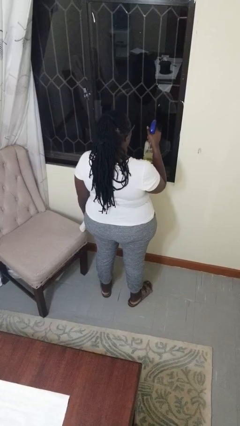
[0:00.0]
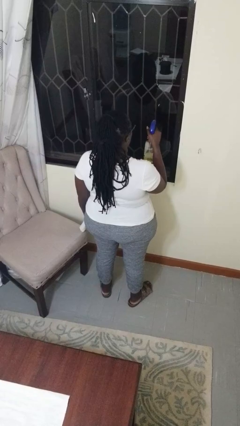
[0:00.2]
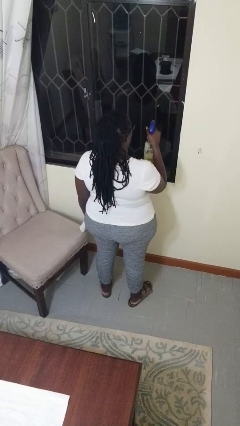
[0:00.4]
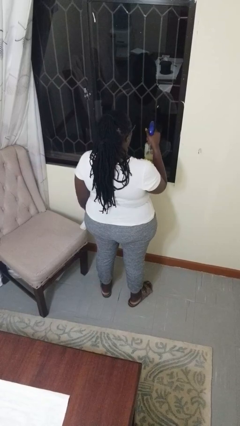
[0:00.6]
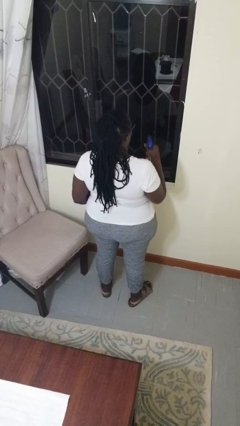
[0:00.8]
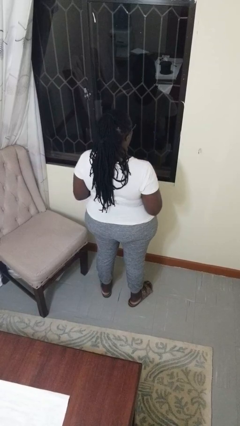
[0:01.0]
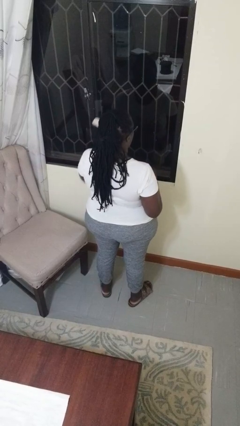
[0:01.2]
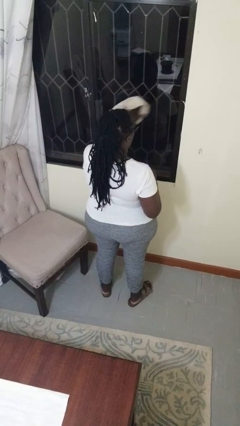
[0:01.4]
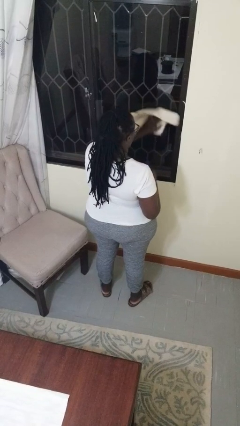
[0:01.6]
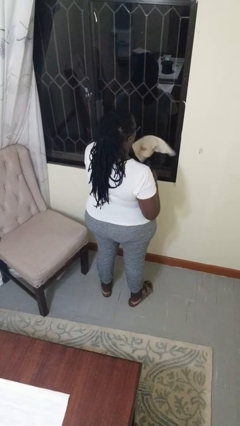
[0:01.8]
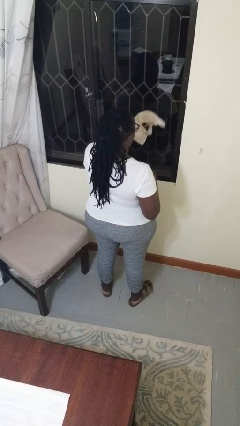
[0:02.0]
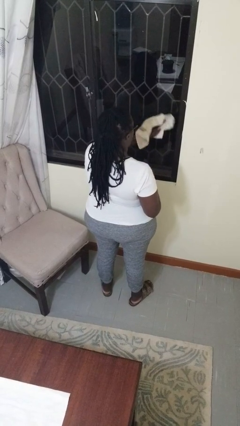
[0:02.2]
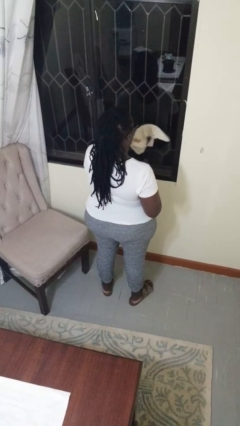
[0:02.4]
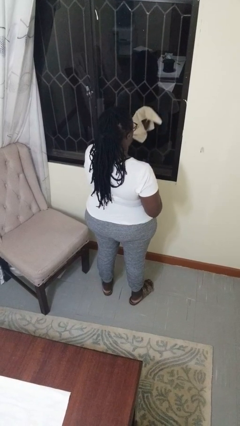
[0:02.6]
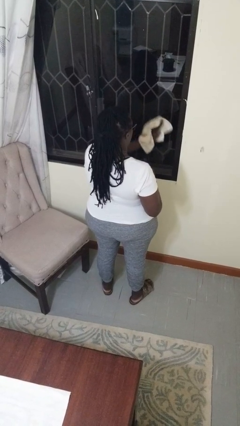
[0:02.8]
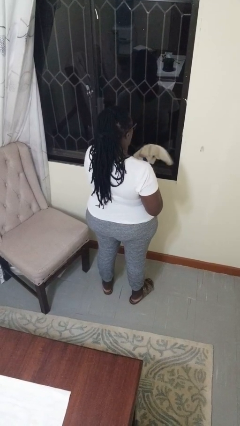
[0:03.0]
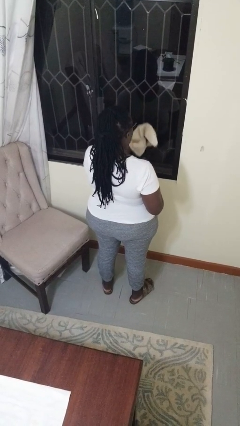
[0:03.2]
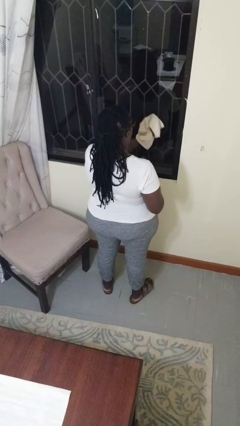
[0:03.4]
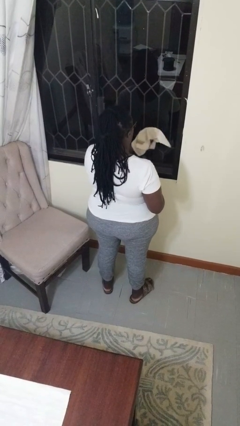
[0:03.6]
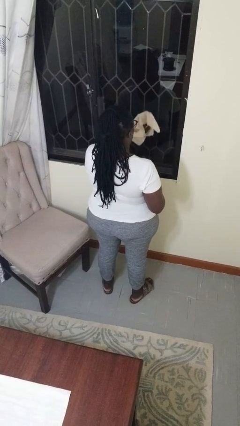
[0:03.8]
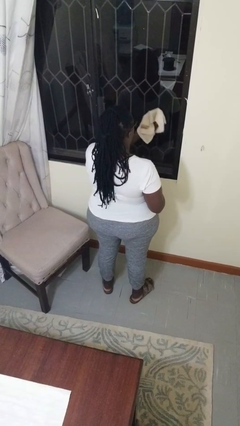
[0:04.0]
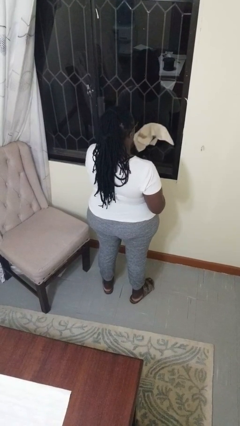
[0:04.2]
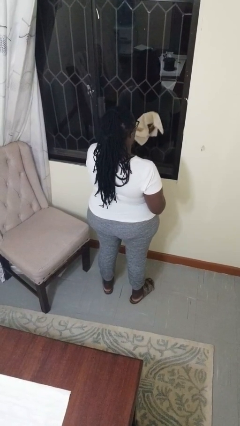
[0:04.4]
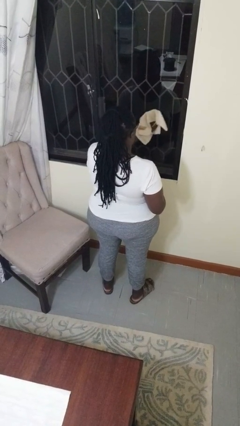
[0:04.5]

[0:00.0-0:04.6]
person washes window

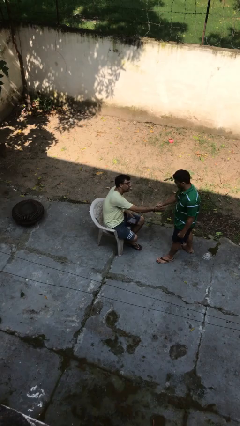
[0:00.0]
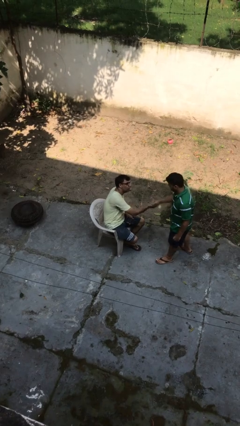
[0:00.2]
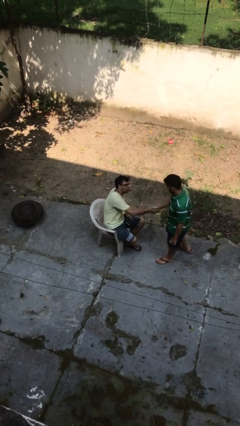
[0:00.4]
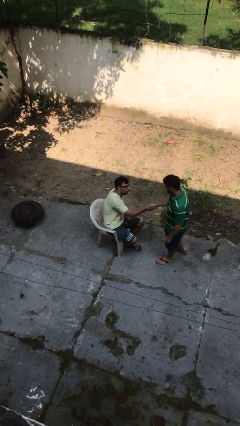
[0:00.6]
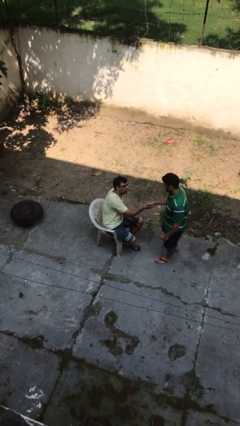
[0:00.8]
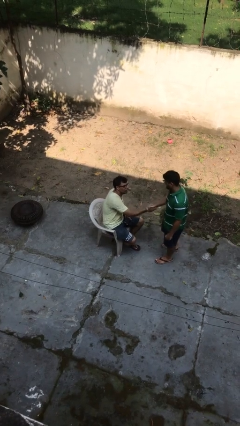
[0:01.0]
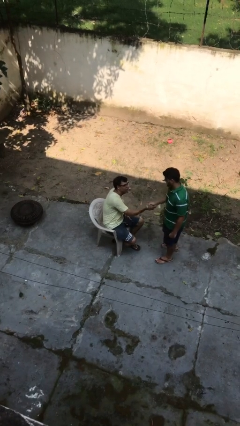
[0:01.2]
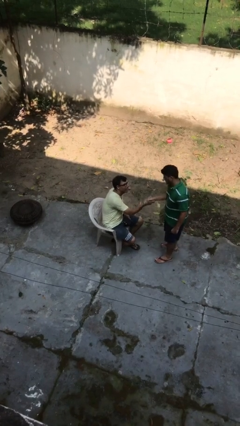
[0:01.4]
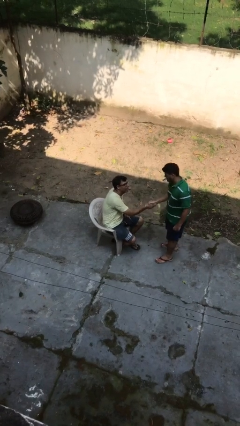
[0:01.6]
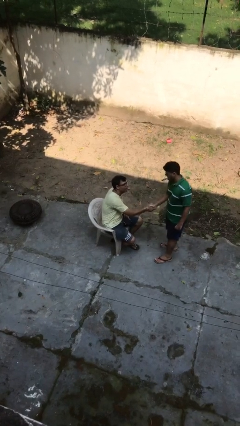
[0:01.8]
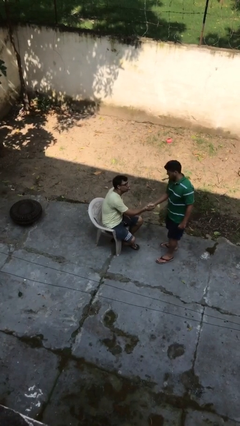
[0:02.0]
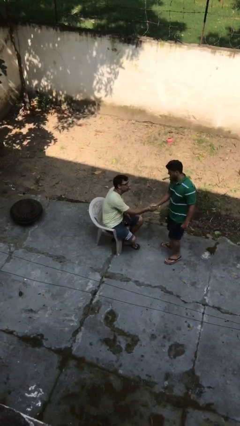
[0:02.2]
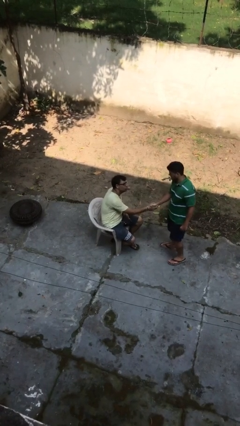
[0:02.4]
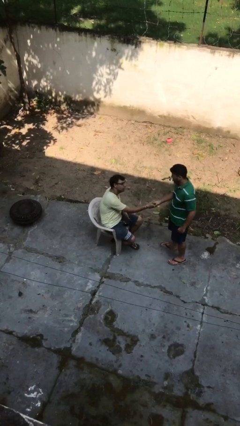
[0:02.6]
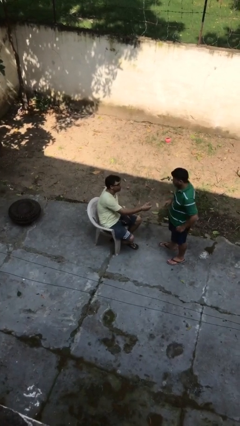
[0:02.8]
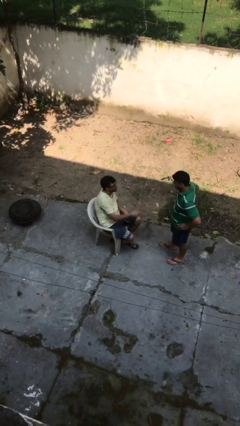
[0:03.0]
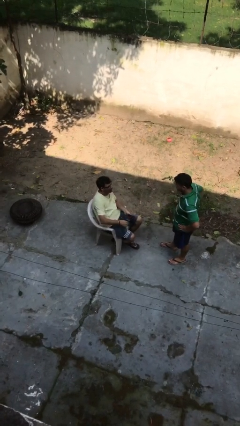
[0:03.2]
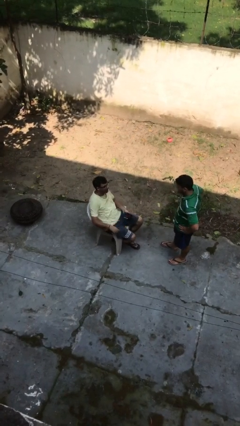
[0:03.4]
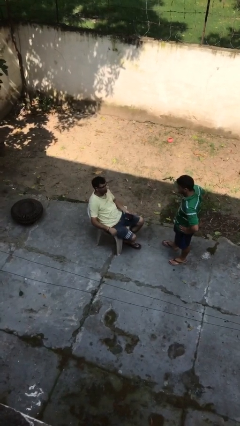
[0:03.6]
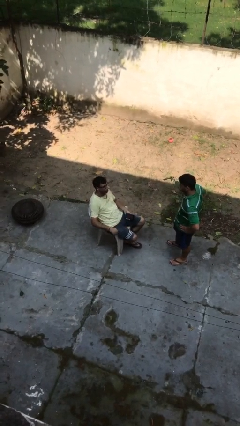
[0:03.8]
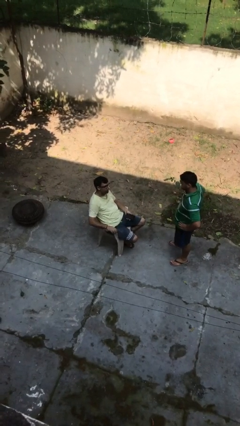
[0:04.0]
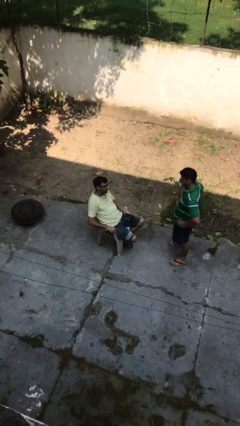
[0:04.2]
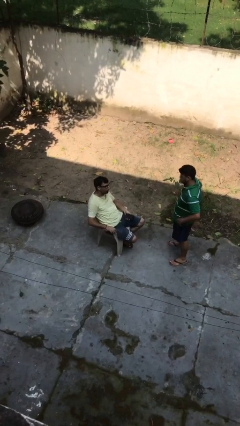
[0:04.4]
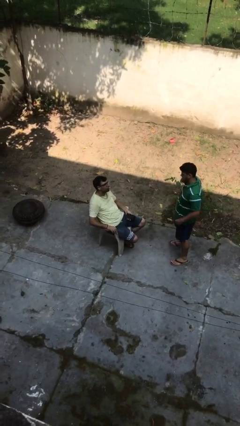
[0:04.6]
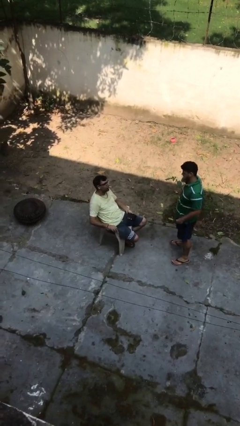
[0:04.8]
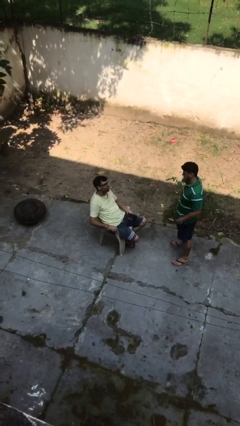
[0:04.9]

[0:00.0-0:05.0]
person shakes hand

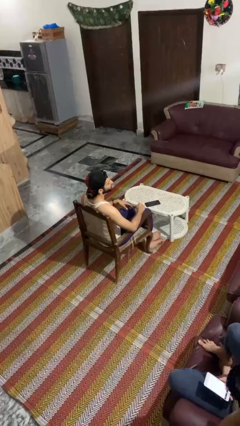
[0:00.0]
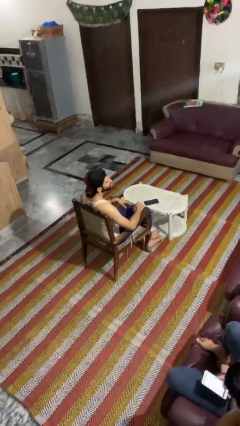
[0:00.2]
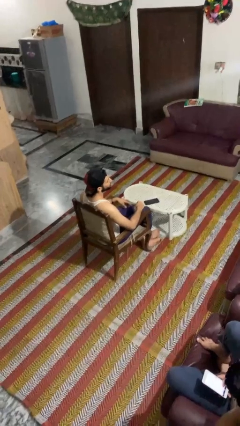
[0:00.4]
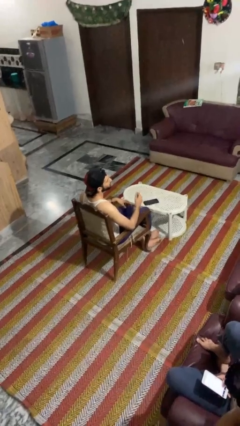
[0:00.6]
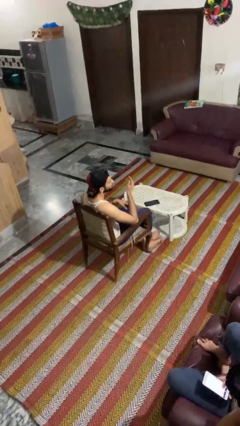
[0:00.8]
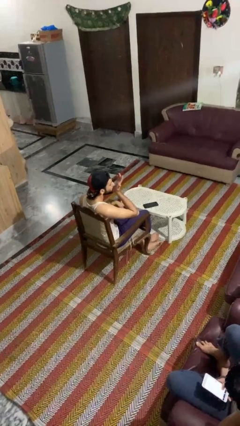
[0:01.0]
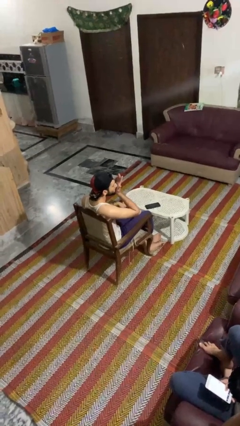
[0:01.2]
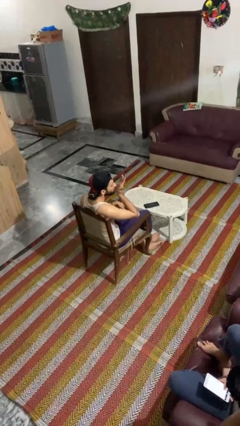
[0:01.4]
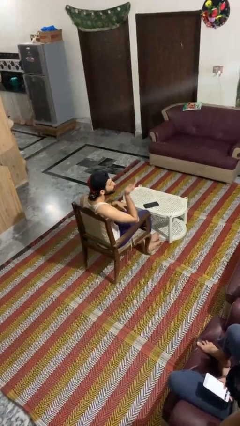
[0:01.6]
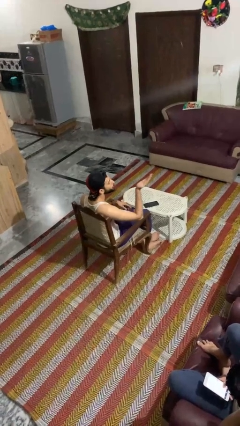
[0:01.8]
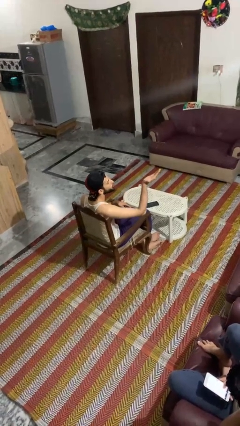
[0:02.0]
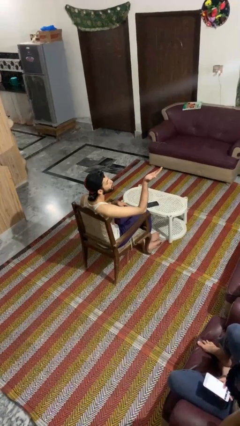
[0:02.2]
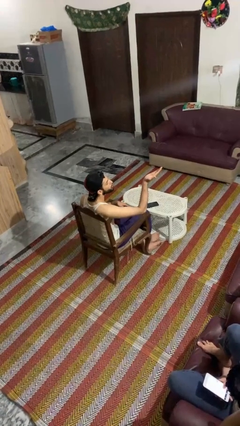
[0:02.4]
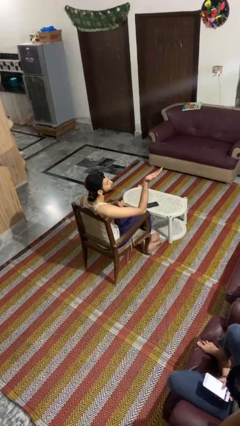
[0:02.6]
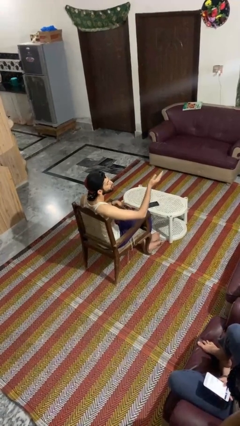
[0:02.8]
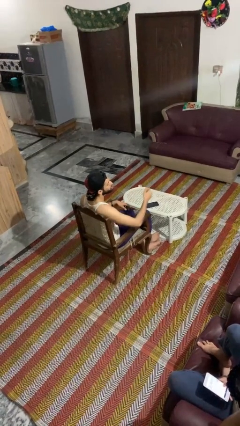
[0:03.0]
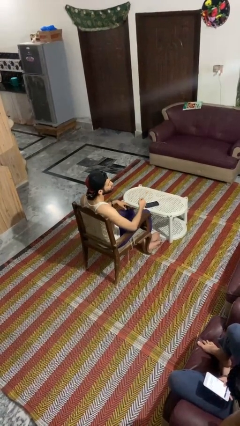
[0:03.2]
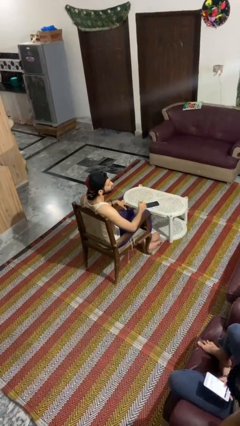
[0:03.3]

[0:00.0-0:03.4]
person gestures blow kiss

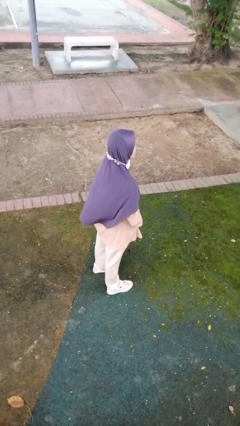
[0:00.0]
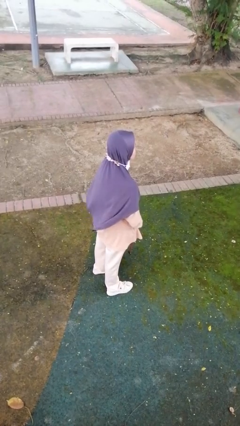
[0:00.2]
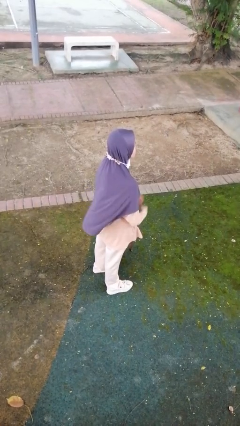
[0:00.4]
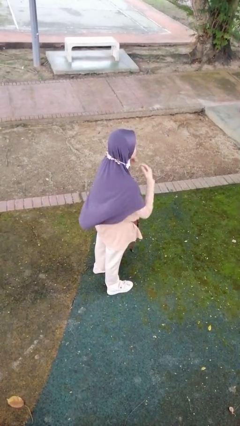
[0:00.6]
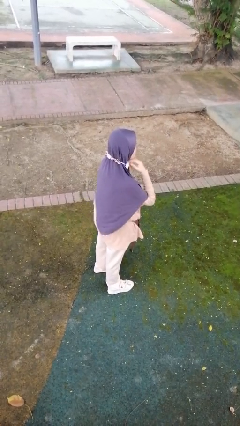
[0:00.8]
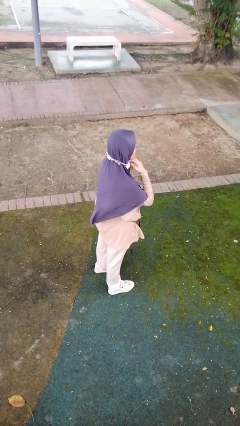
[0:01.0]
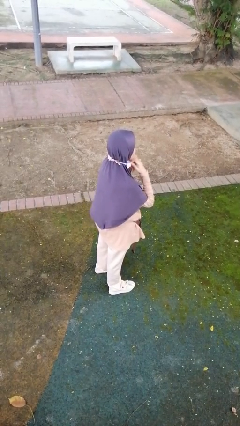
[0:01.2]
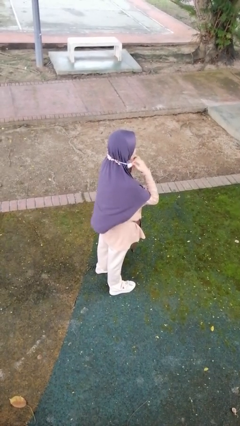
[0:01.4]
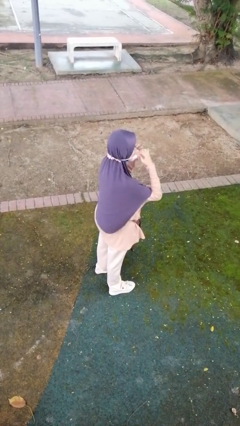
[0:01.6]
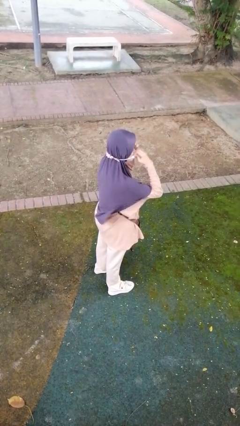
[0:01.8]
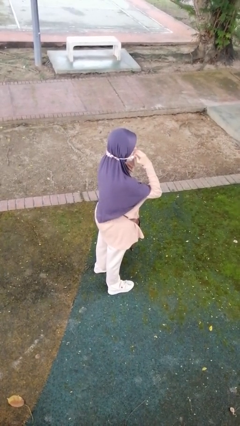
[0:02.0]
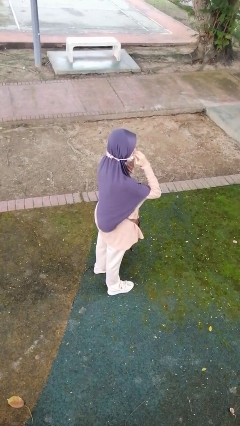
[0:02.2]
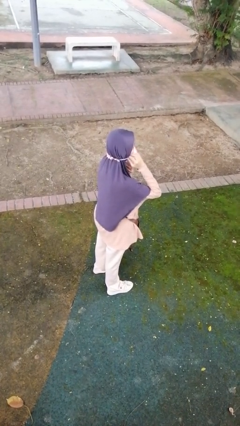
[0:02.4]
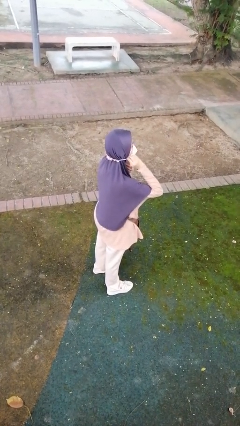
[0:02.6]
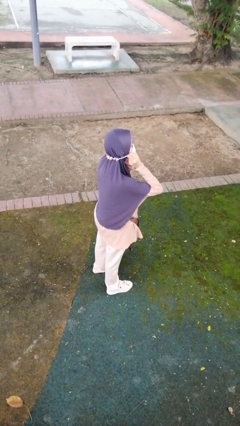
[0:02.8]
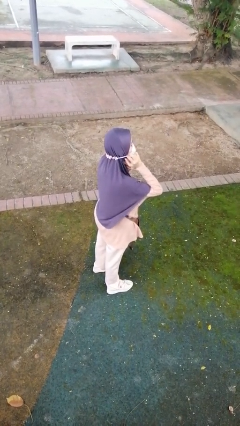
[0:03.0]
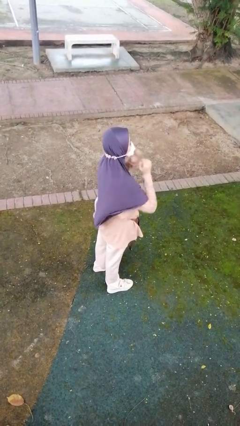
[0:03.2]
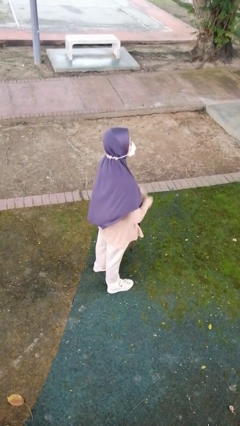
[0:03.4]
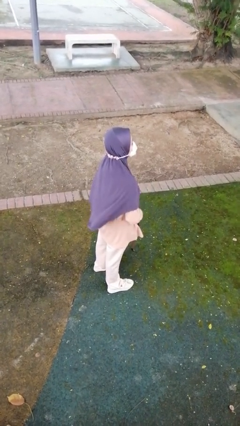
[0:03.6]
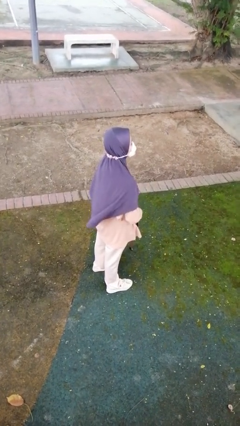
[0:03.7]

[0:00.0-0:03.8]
person puts on facemask

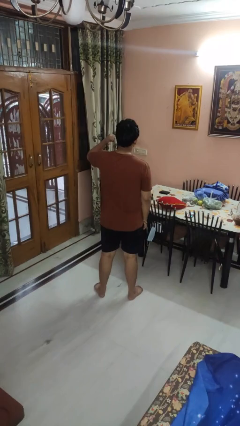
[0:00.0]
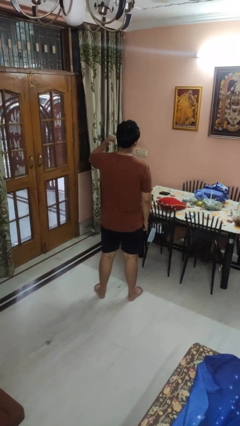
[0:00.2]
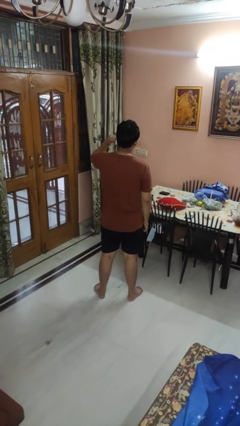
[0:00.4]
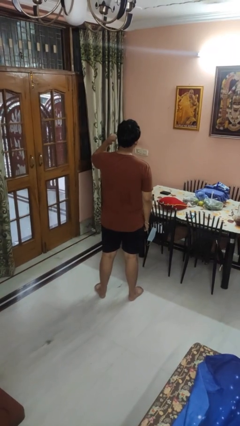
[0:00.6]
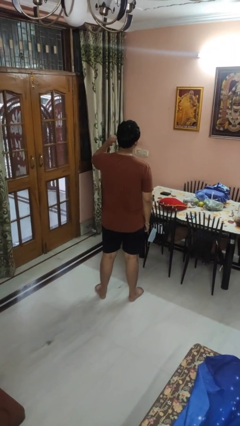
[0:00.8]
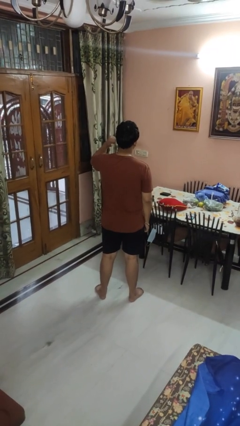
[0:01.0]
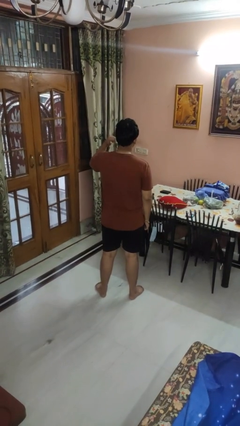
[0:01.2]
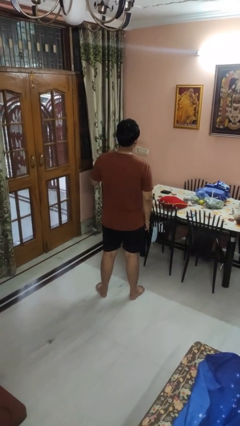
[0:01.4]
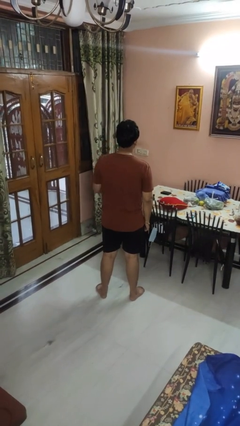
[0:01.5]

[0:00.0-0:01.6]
person gestures behind me
